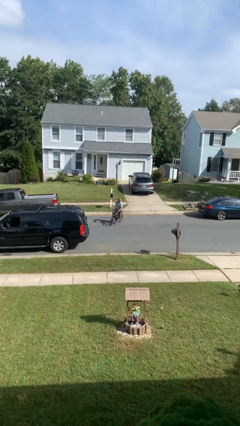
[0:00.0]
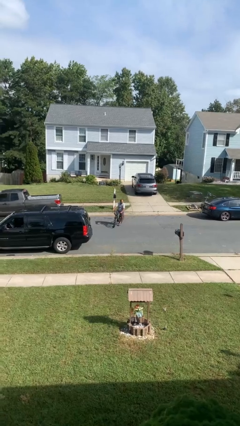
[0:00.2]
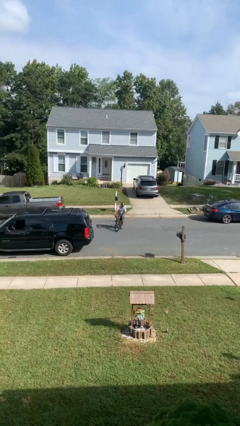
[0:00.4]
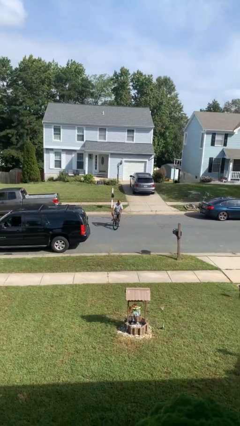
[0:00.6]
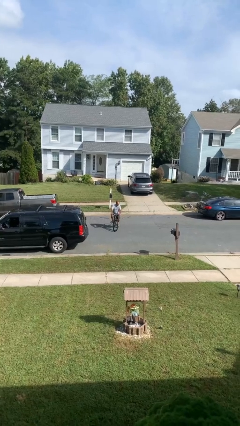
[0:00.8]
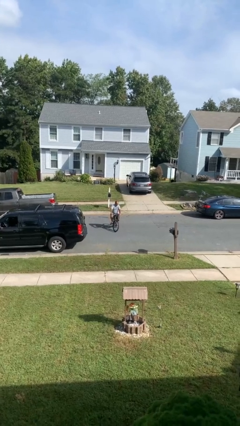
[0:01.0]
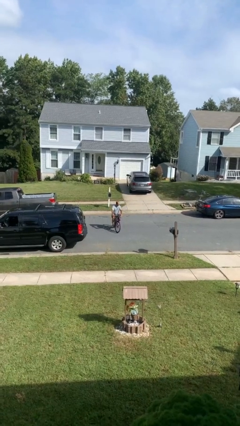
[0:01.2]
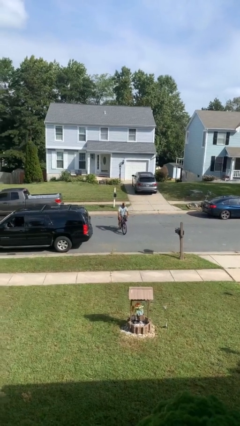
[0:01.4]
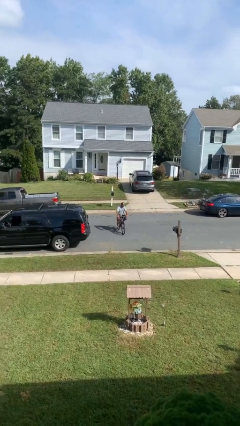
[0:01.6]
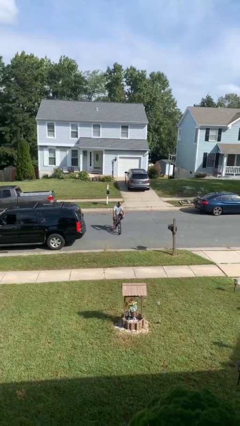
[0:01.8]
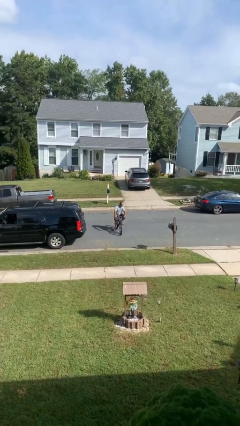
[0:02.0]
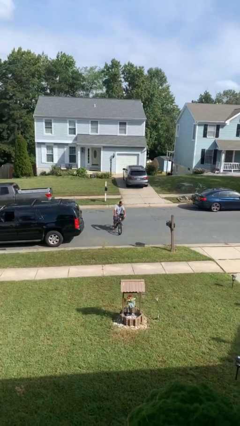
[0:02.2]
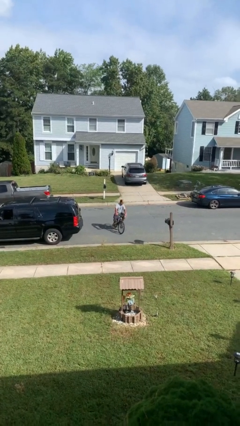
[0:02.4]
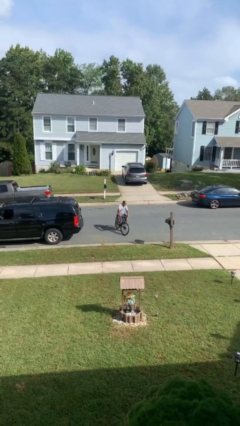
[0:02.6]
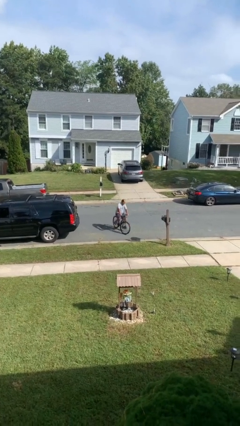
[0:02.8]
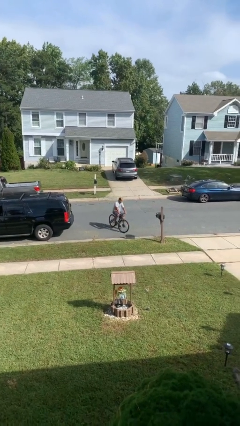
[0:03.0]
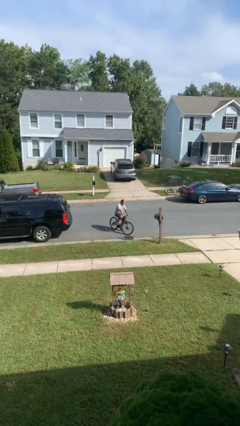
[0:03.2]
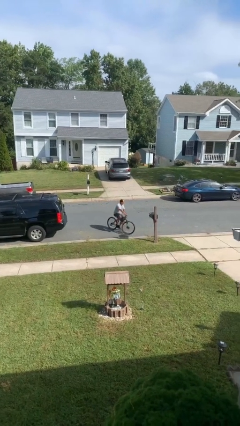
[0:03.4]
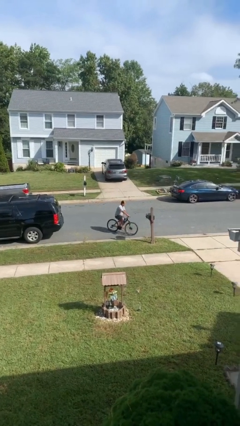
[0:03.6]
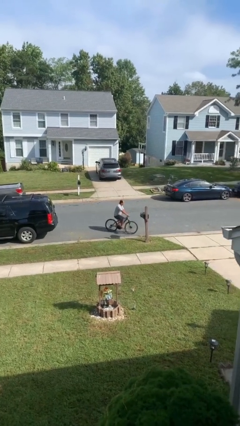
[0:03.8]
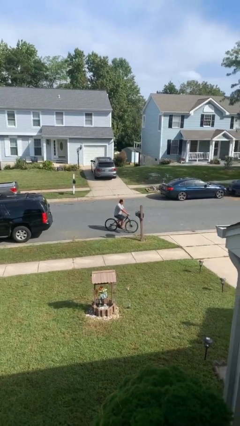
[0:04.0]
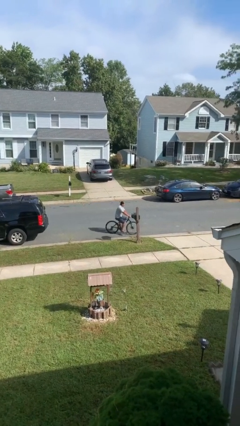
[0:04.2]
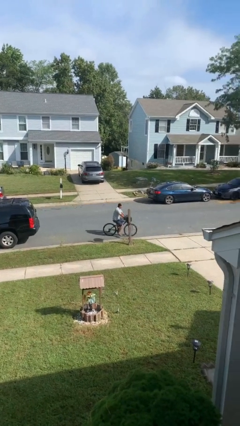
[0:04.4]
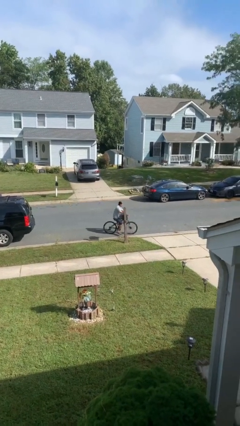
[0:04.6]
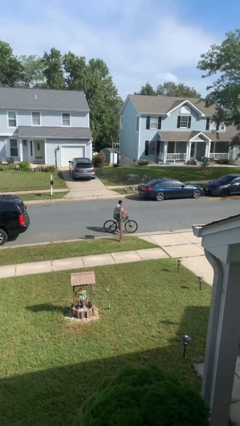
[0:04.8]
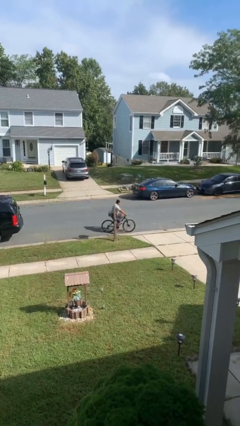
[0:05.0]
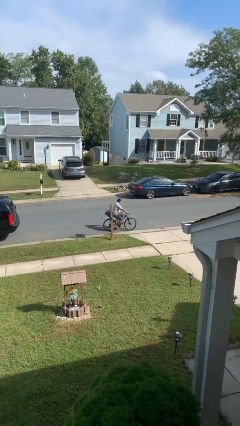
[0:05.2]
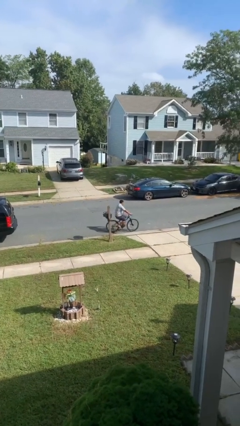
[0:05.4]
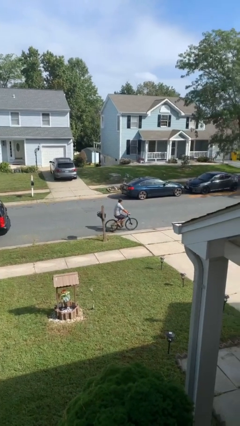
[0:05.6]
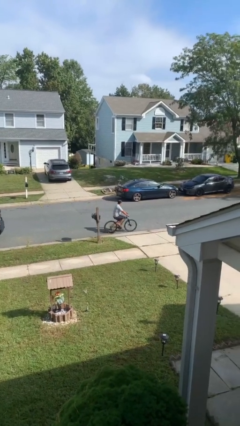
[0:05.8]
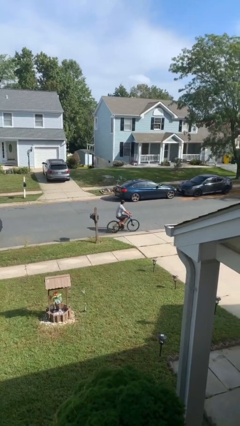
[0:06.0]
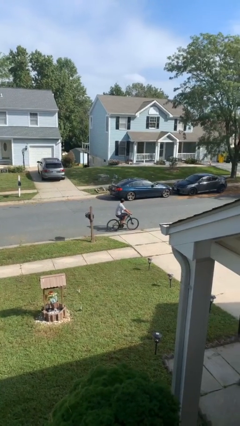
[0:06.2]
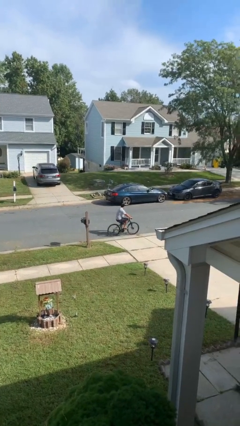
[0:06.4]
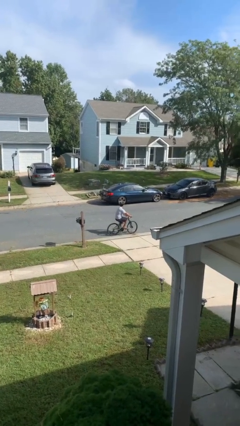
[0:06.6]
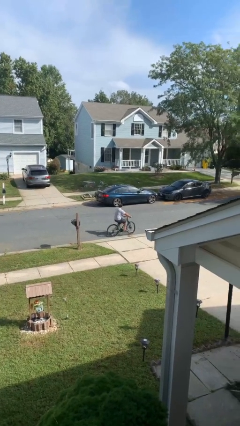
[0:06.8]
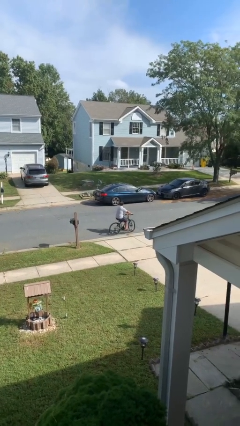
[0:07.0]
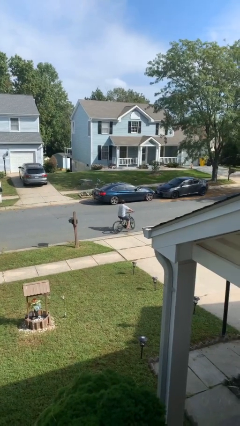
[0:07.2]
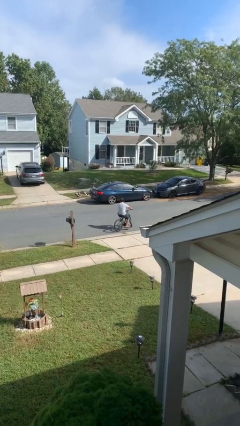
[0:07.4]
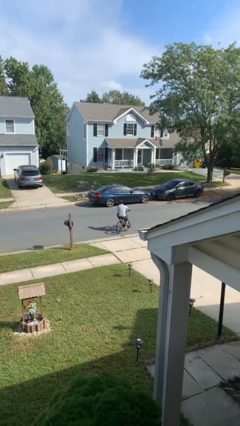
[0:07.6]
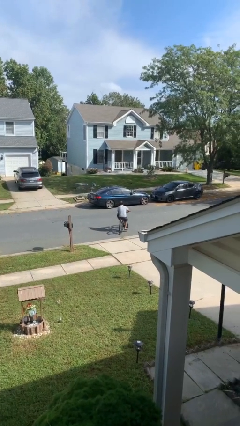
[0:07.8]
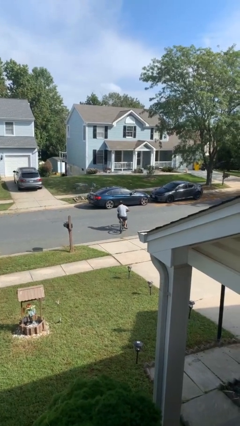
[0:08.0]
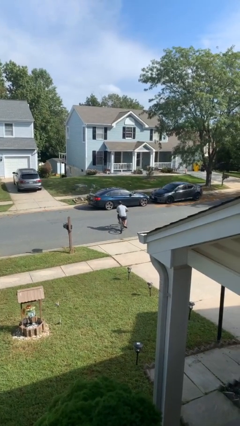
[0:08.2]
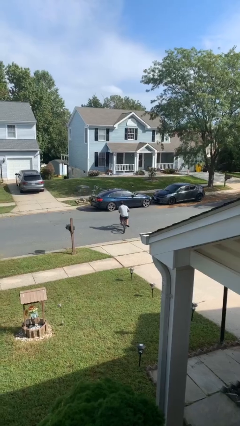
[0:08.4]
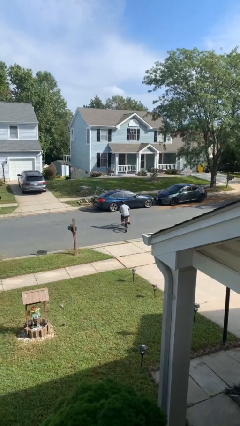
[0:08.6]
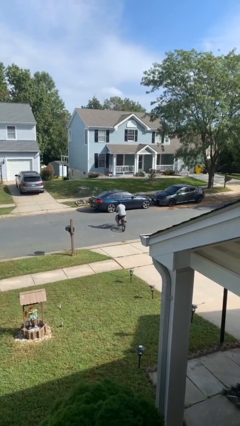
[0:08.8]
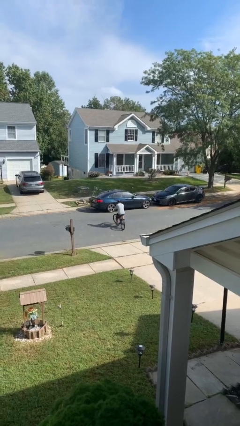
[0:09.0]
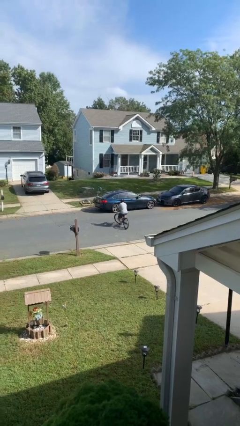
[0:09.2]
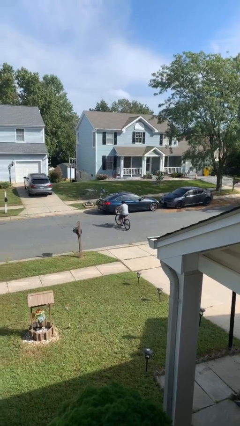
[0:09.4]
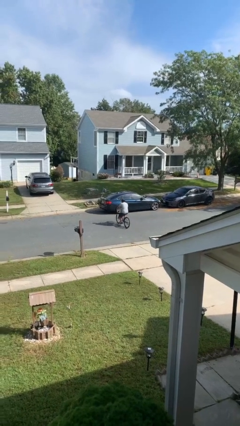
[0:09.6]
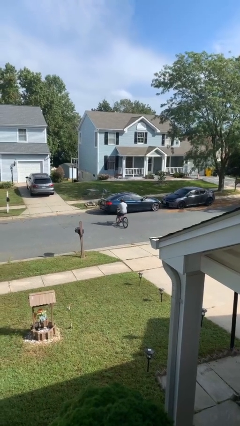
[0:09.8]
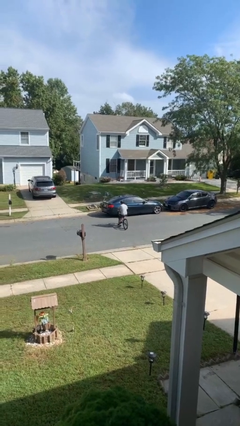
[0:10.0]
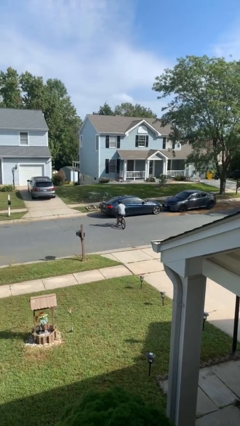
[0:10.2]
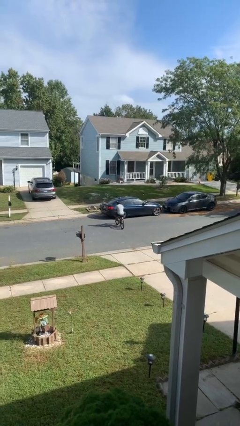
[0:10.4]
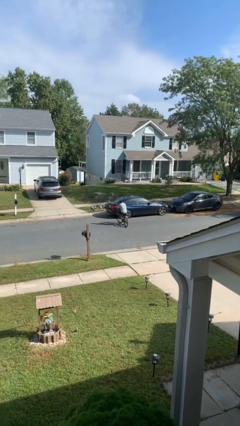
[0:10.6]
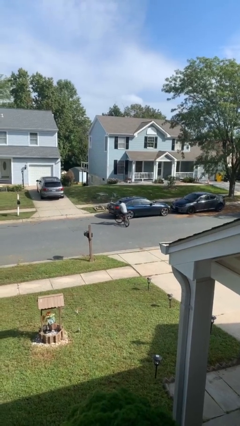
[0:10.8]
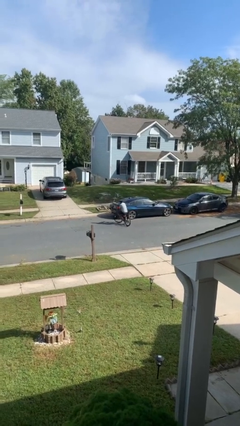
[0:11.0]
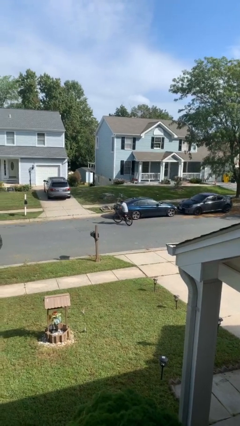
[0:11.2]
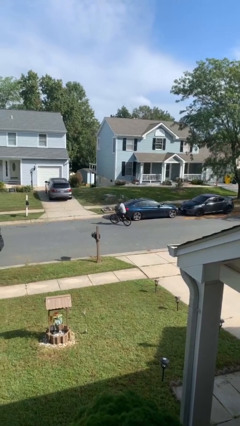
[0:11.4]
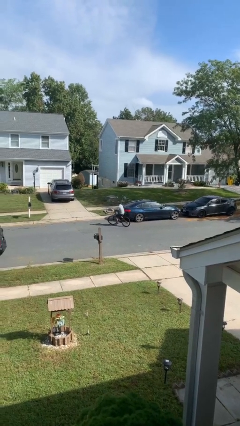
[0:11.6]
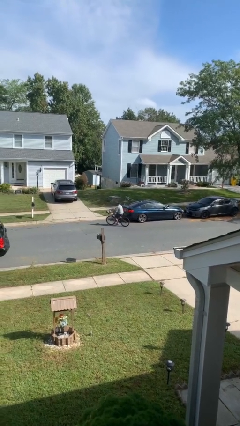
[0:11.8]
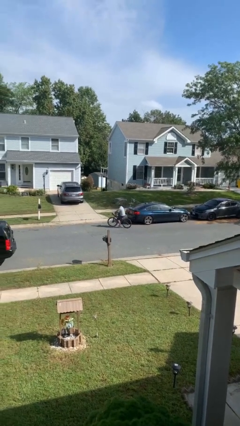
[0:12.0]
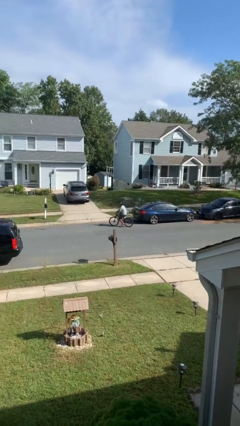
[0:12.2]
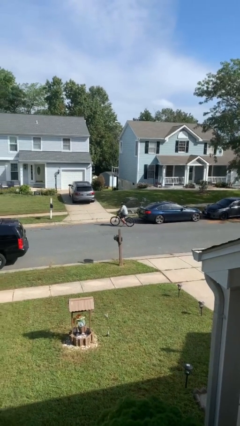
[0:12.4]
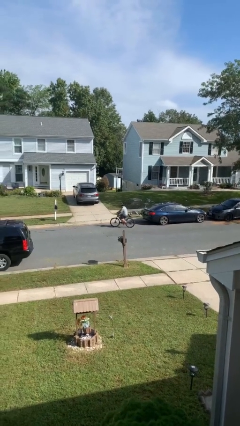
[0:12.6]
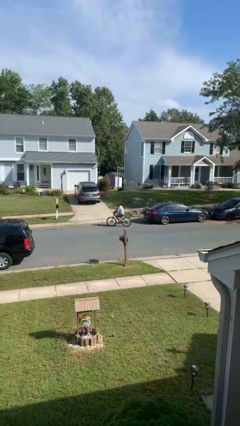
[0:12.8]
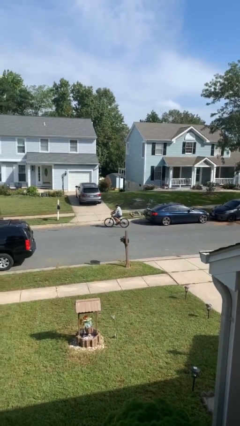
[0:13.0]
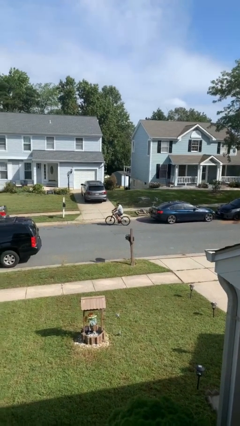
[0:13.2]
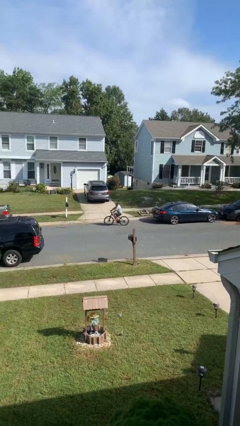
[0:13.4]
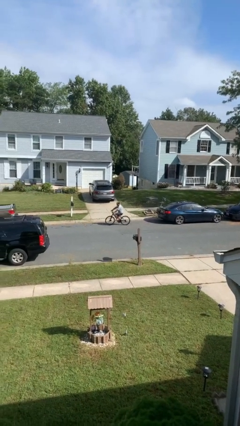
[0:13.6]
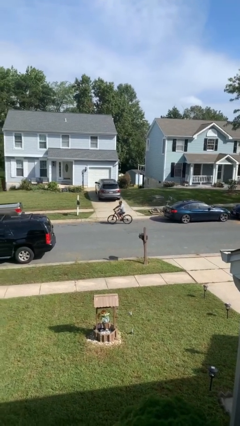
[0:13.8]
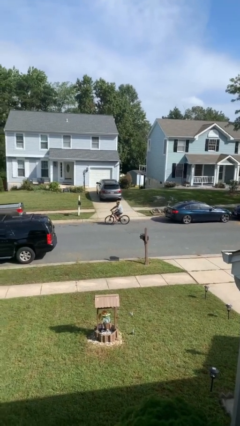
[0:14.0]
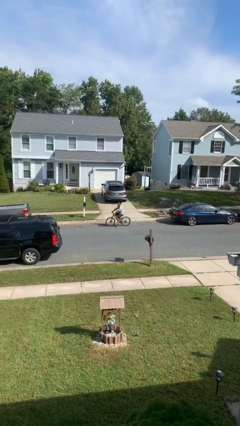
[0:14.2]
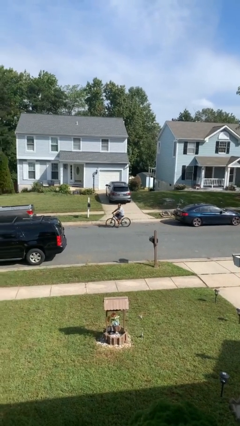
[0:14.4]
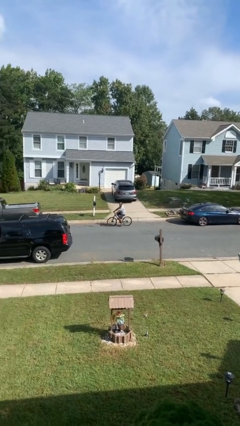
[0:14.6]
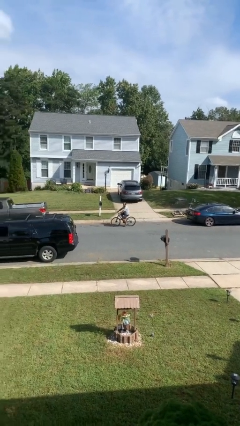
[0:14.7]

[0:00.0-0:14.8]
person rides bicycle

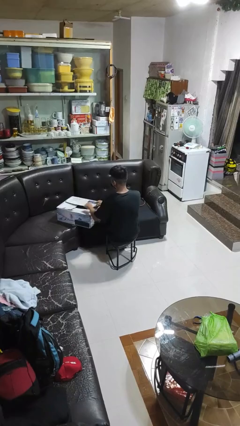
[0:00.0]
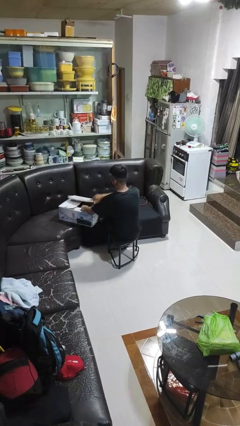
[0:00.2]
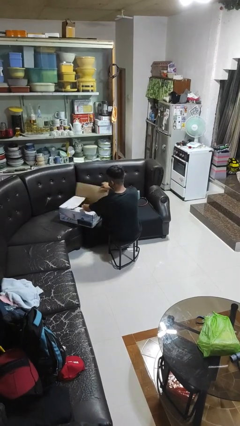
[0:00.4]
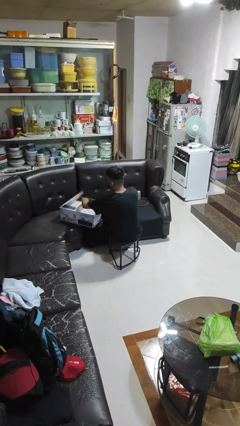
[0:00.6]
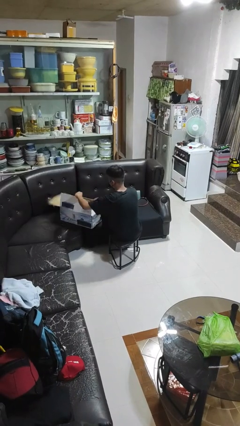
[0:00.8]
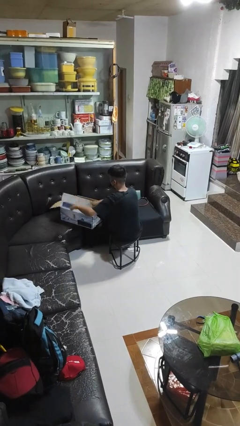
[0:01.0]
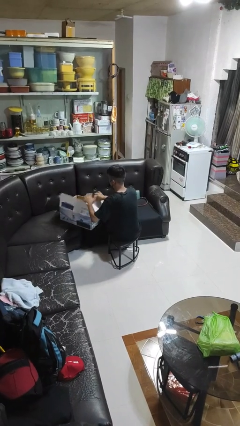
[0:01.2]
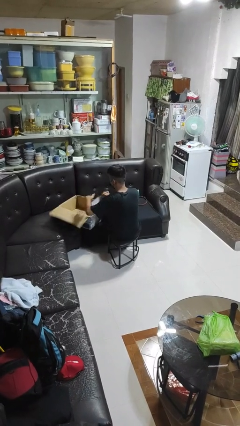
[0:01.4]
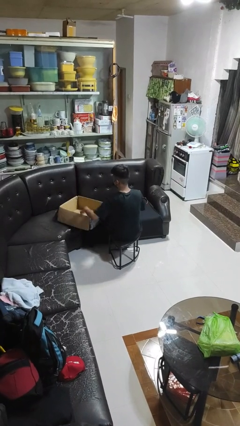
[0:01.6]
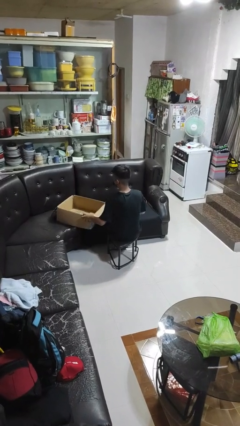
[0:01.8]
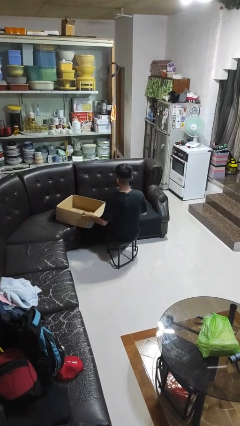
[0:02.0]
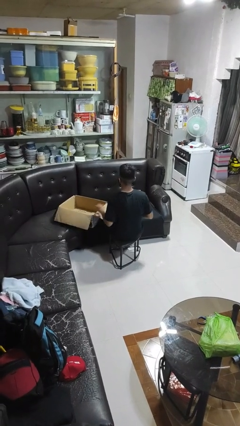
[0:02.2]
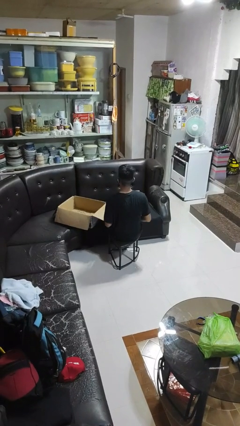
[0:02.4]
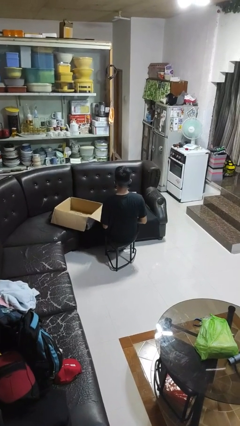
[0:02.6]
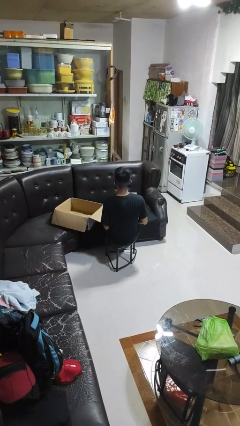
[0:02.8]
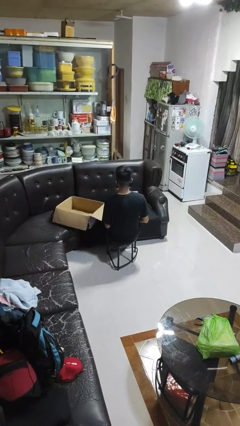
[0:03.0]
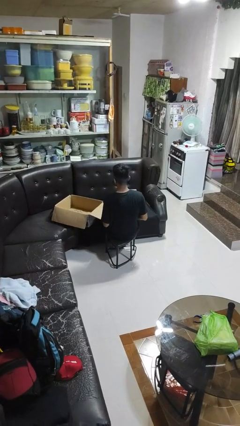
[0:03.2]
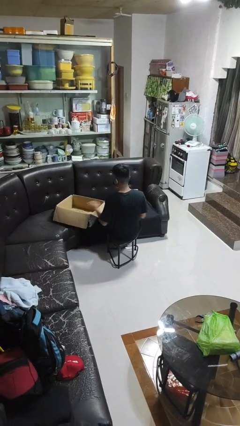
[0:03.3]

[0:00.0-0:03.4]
person opens box
